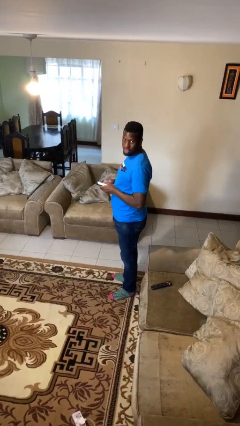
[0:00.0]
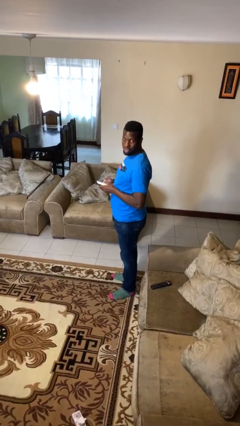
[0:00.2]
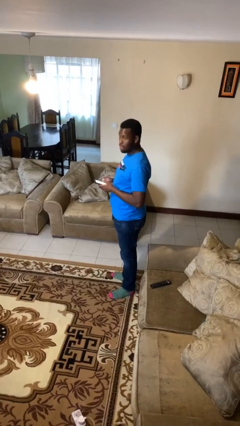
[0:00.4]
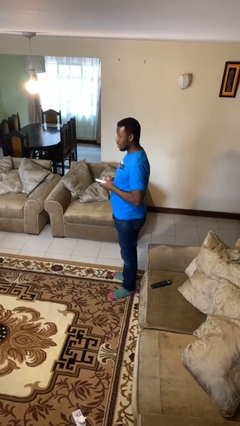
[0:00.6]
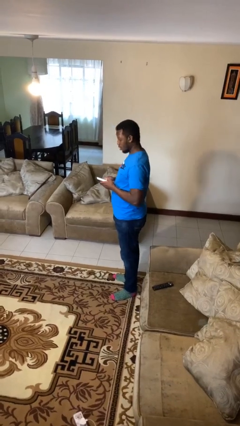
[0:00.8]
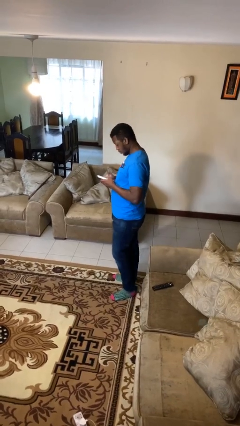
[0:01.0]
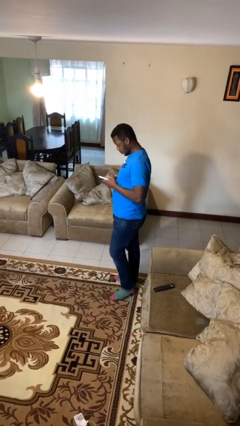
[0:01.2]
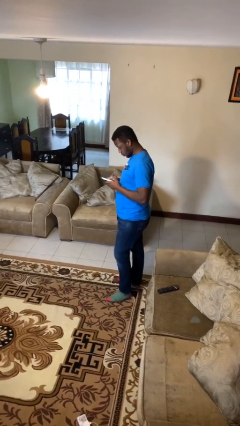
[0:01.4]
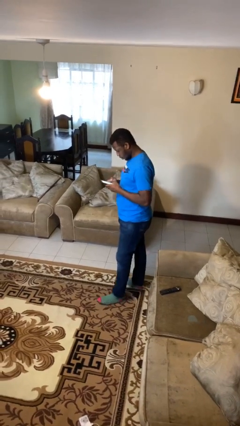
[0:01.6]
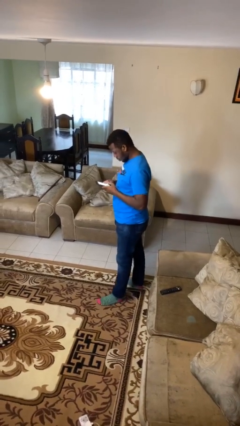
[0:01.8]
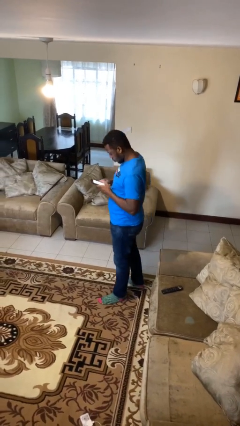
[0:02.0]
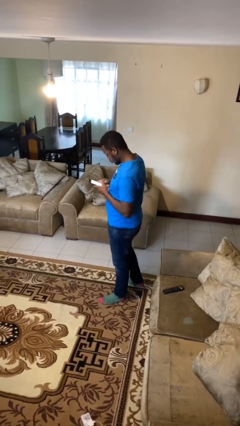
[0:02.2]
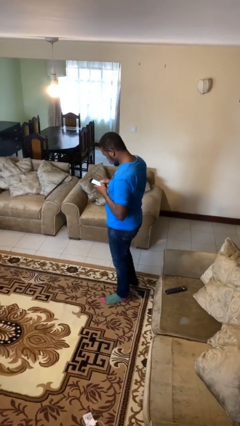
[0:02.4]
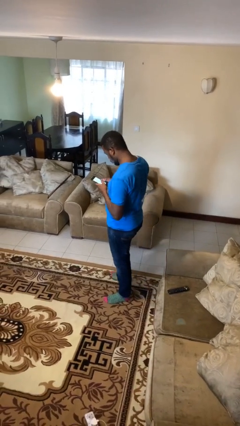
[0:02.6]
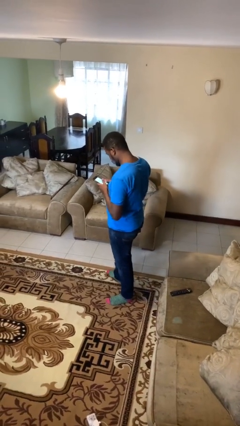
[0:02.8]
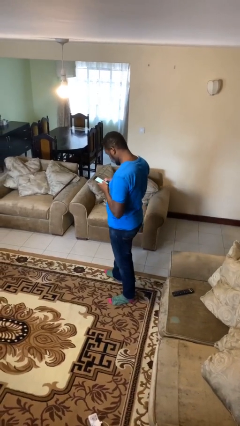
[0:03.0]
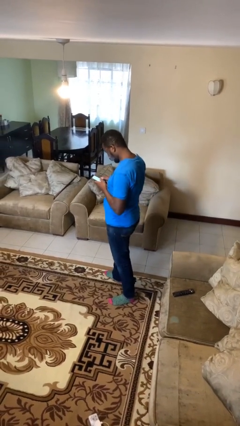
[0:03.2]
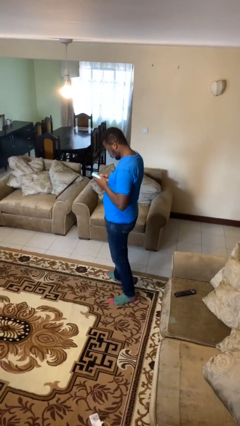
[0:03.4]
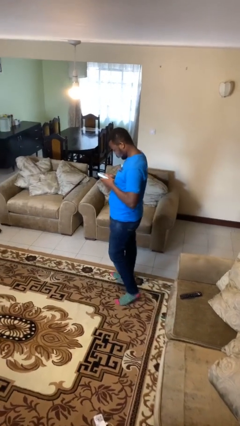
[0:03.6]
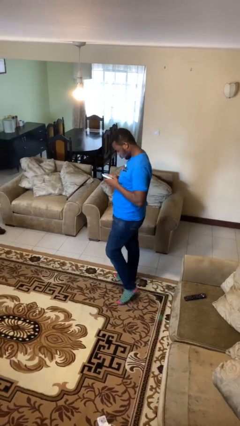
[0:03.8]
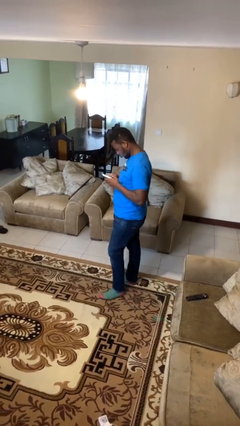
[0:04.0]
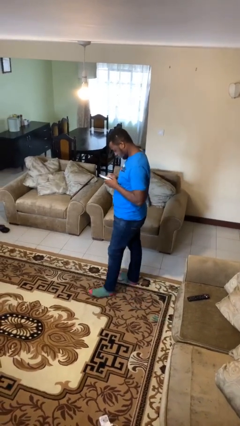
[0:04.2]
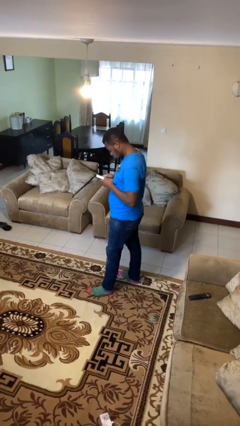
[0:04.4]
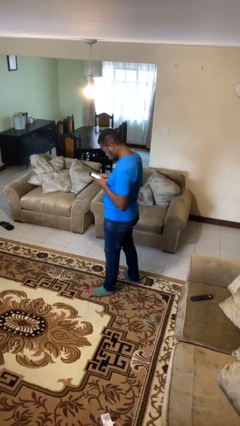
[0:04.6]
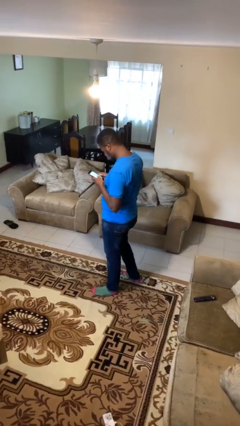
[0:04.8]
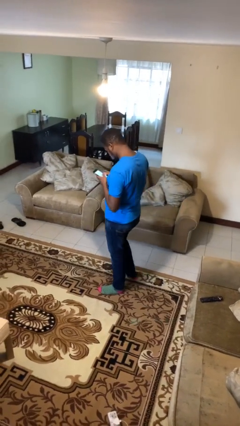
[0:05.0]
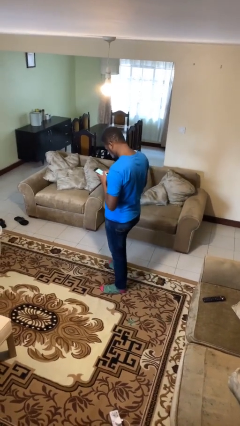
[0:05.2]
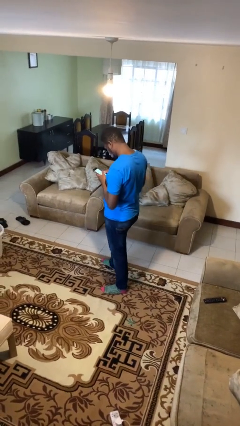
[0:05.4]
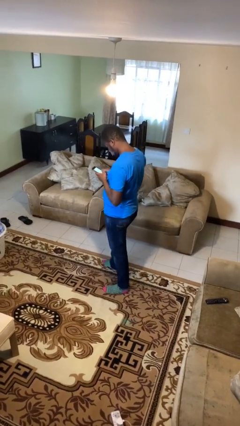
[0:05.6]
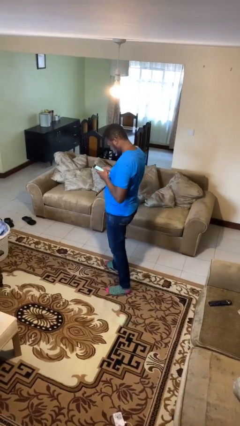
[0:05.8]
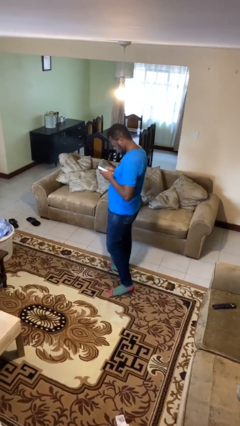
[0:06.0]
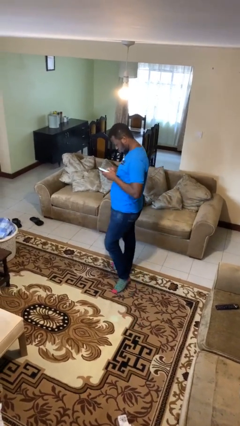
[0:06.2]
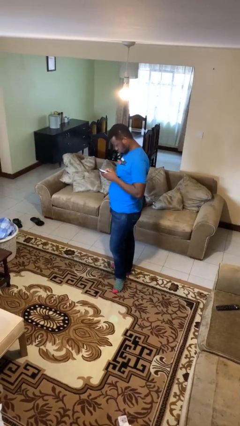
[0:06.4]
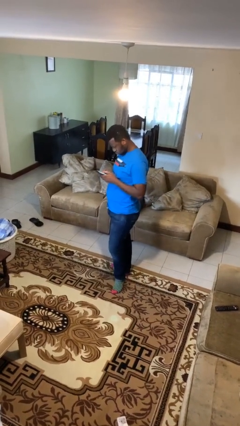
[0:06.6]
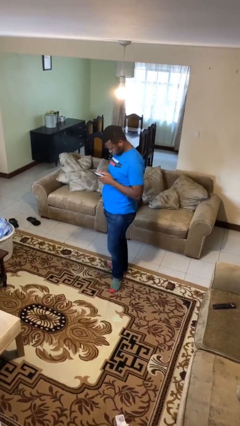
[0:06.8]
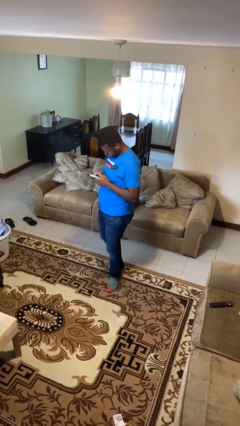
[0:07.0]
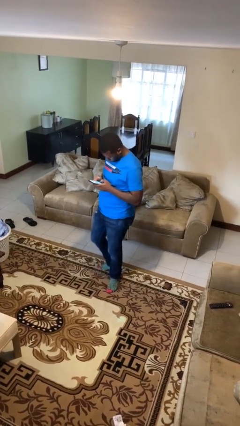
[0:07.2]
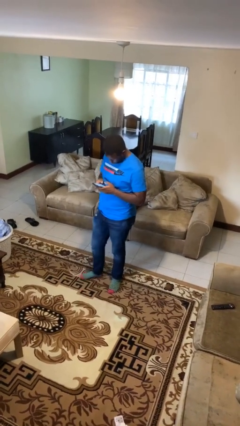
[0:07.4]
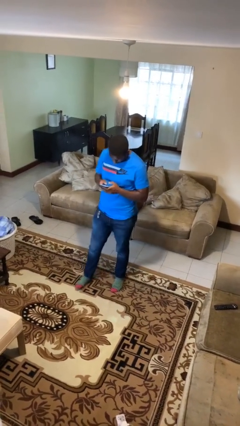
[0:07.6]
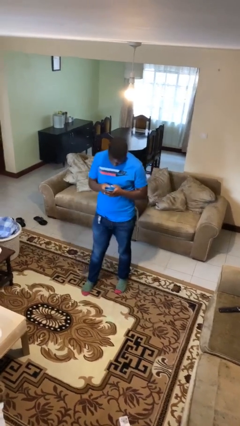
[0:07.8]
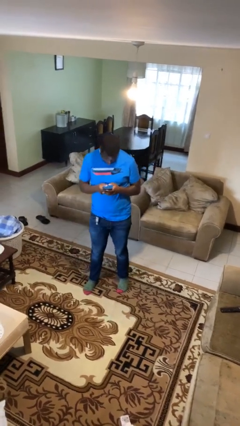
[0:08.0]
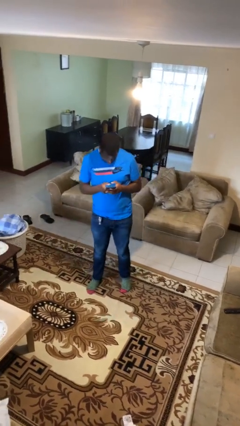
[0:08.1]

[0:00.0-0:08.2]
person texts on phone

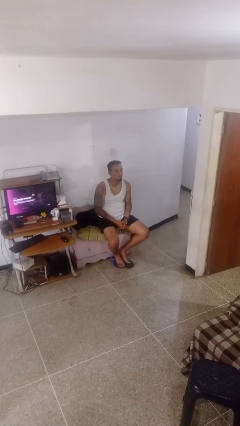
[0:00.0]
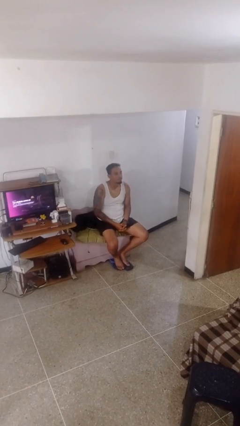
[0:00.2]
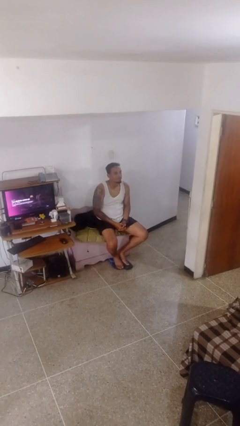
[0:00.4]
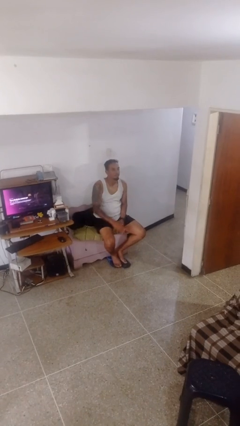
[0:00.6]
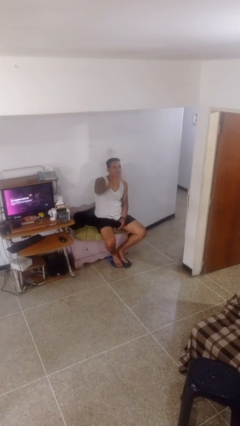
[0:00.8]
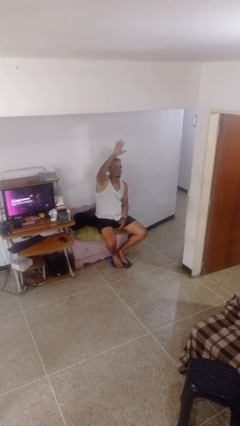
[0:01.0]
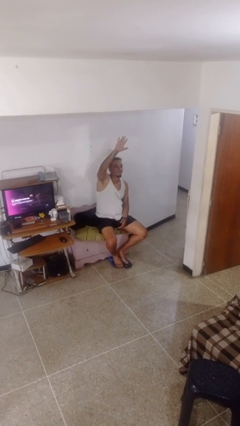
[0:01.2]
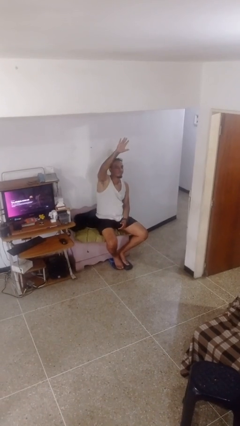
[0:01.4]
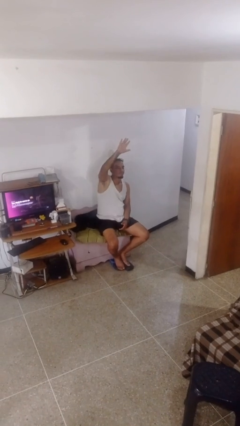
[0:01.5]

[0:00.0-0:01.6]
person gestures raise hand

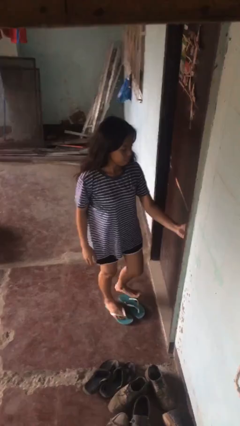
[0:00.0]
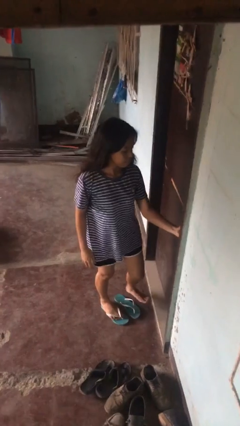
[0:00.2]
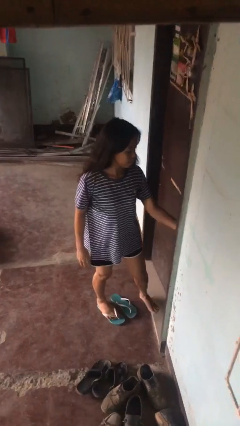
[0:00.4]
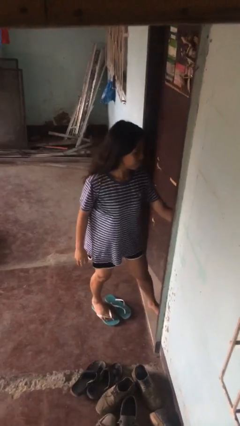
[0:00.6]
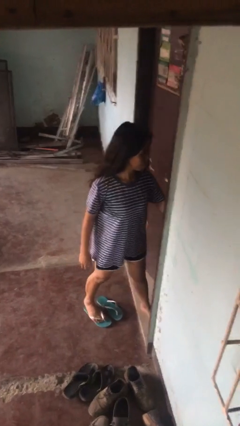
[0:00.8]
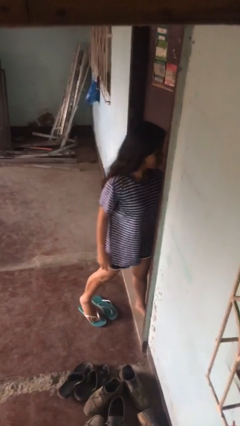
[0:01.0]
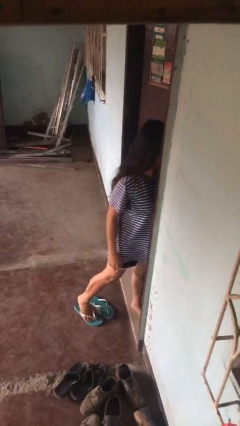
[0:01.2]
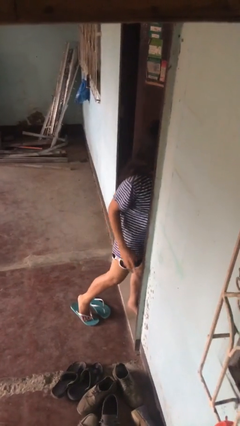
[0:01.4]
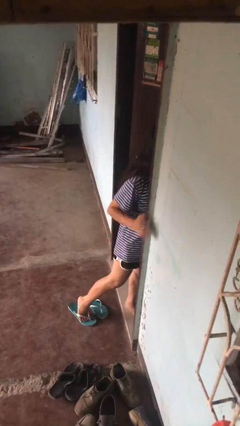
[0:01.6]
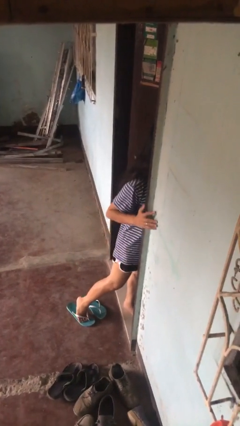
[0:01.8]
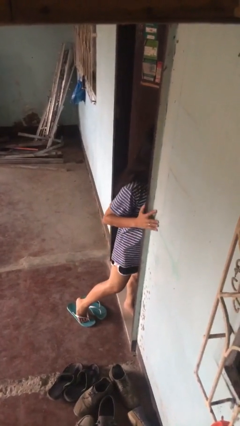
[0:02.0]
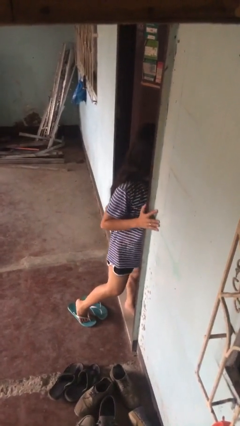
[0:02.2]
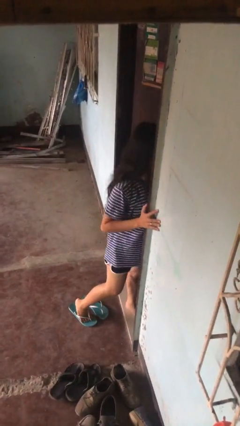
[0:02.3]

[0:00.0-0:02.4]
person opens facility door

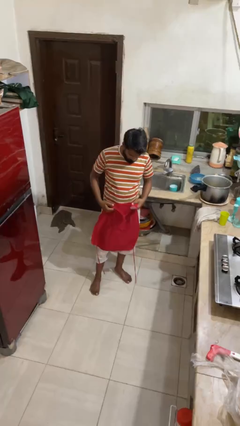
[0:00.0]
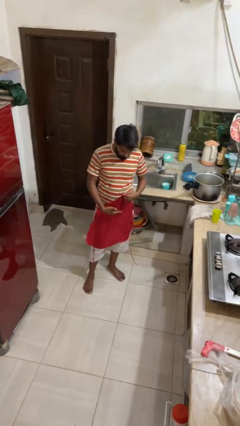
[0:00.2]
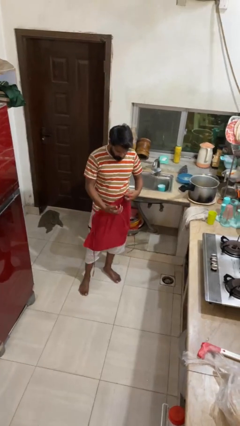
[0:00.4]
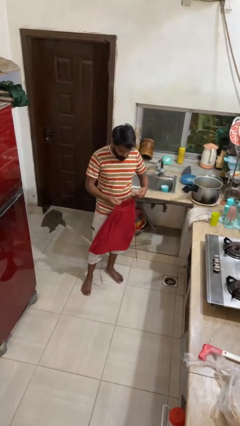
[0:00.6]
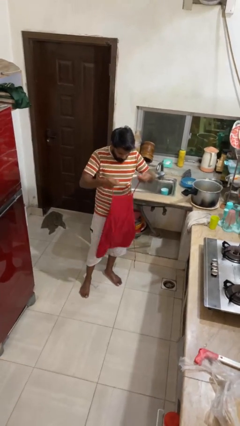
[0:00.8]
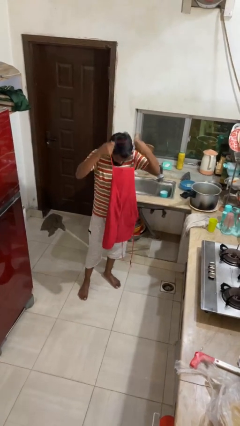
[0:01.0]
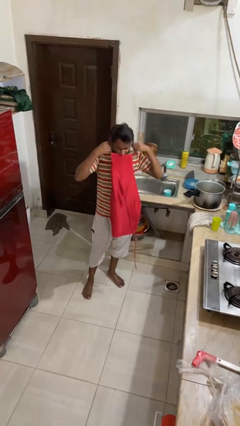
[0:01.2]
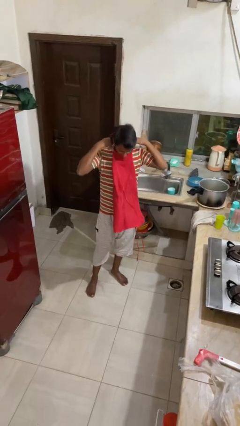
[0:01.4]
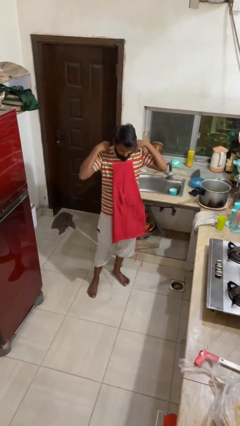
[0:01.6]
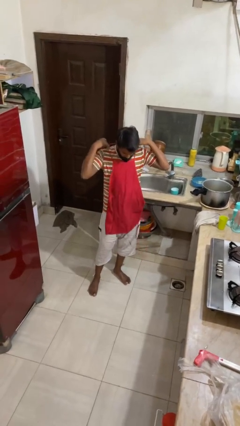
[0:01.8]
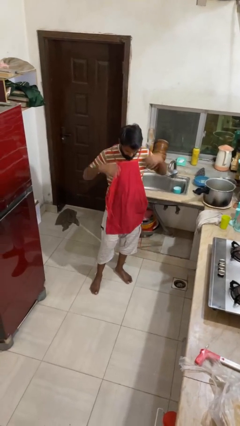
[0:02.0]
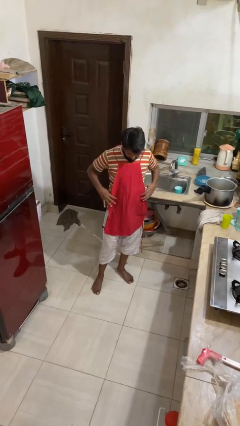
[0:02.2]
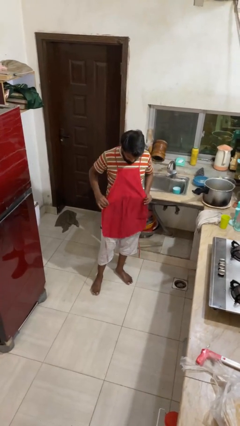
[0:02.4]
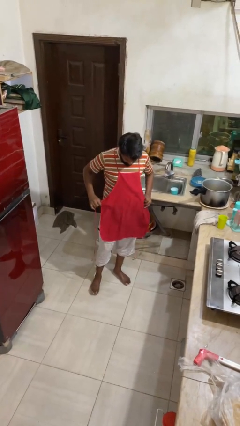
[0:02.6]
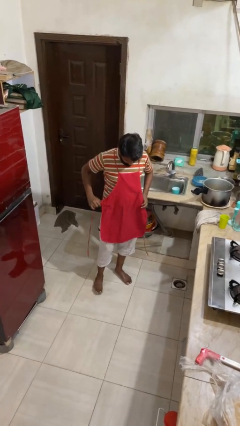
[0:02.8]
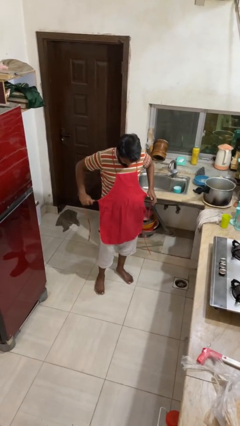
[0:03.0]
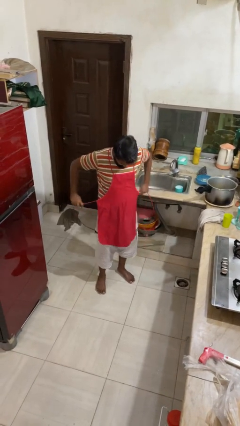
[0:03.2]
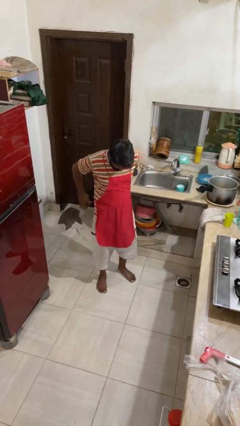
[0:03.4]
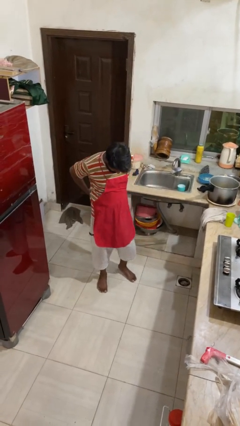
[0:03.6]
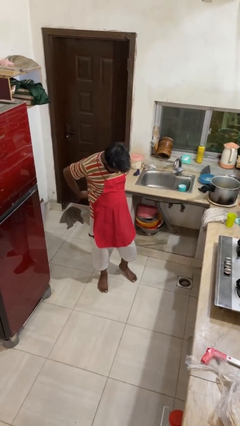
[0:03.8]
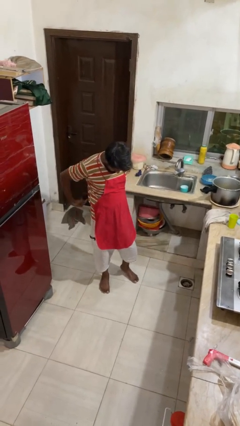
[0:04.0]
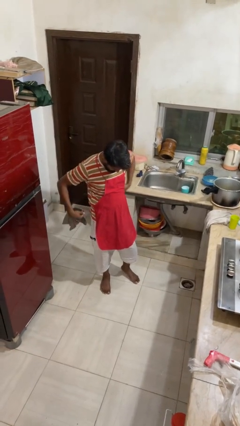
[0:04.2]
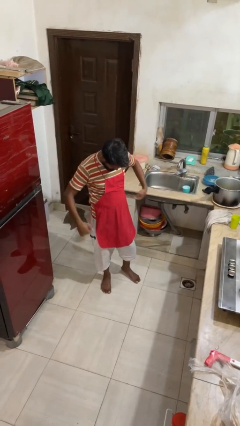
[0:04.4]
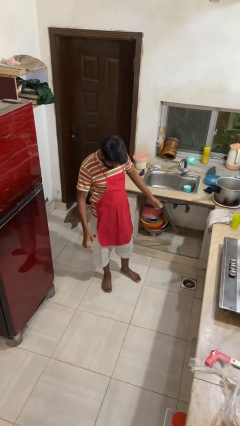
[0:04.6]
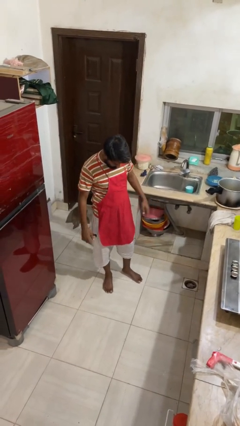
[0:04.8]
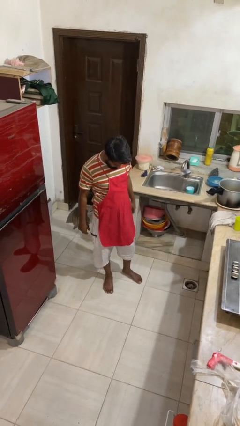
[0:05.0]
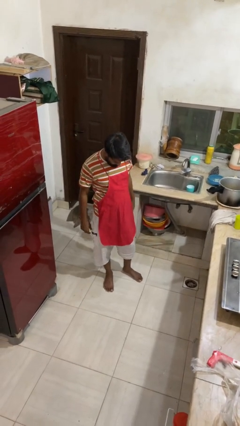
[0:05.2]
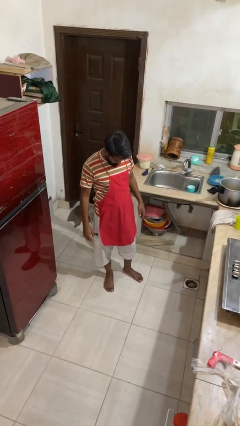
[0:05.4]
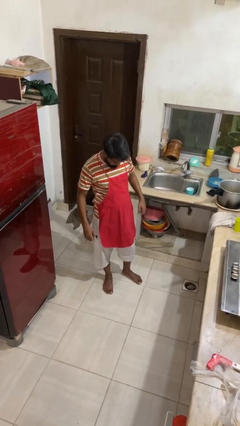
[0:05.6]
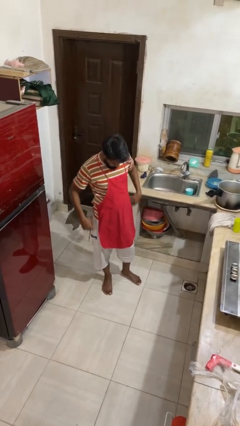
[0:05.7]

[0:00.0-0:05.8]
person puts on apron
